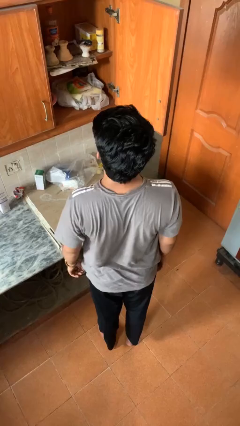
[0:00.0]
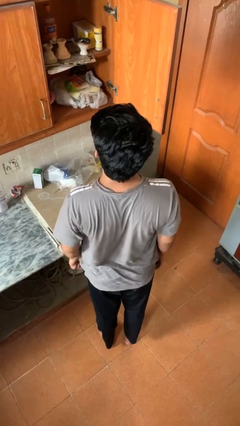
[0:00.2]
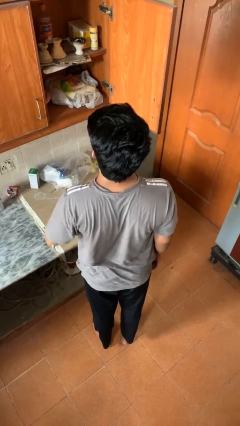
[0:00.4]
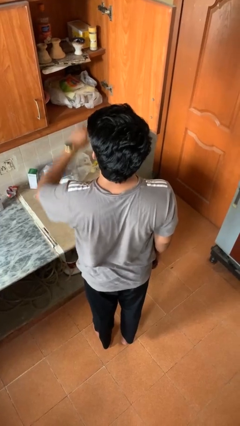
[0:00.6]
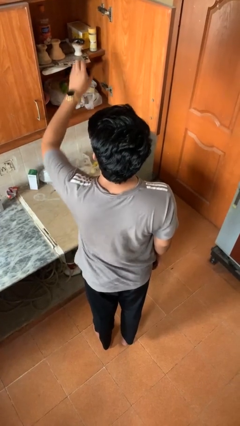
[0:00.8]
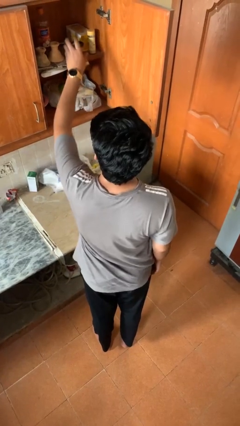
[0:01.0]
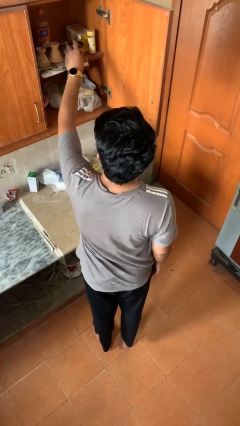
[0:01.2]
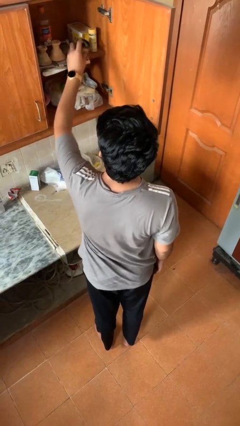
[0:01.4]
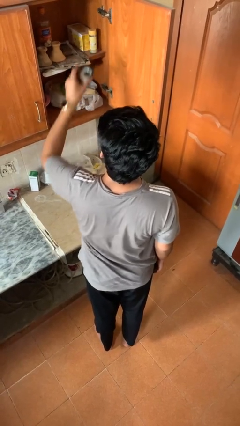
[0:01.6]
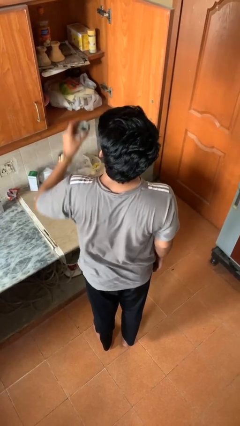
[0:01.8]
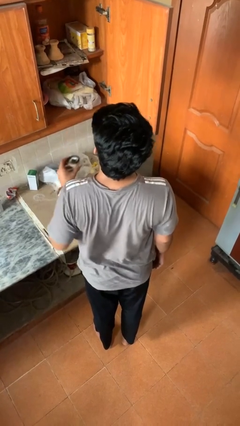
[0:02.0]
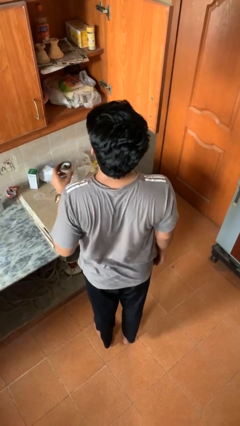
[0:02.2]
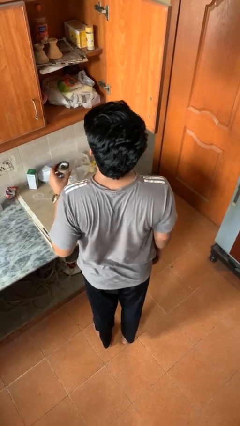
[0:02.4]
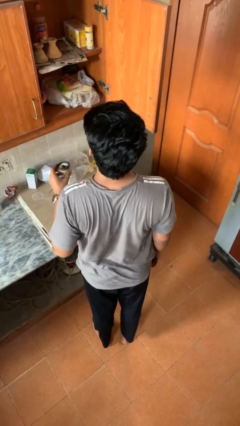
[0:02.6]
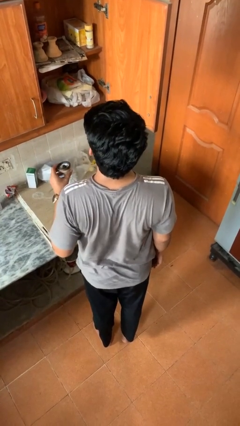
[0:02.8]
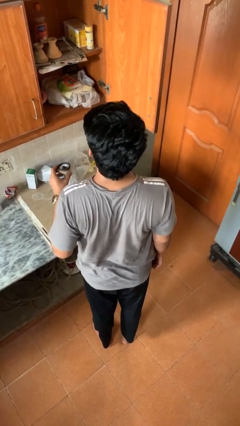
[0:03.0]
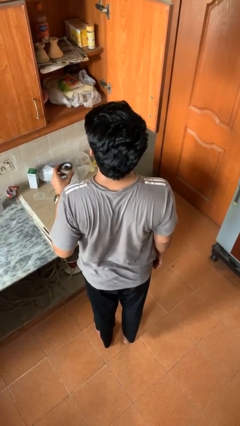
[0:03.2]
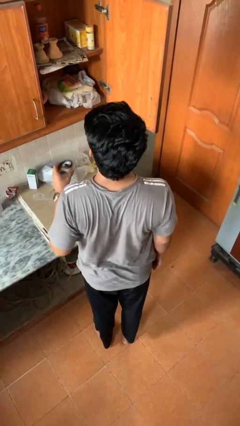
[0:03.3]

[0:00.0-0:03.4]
person takes object from cabinet

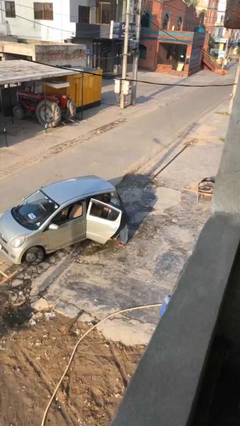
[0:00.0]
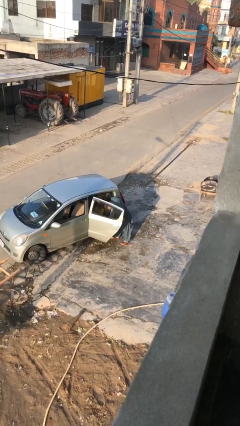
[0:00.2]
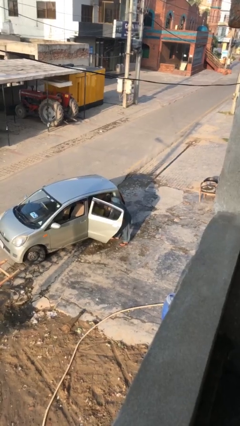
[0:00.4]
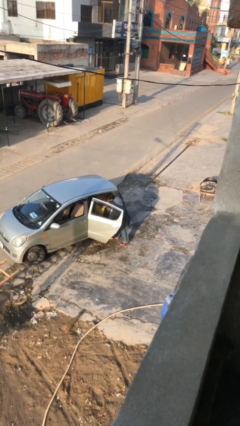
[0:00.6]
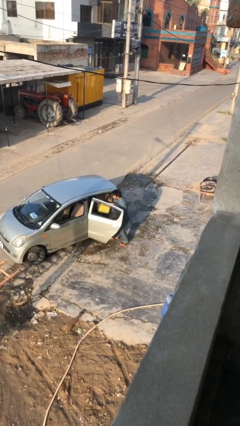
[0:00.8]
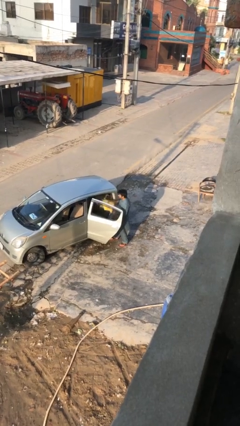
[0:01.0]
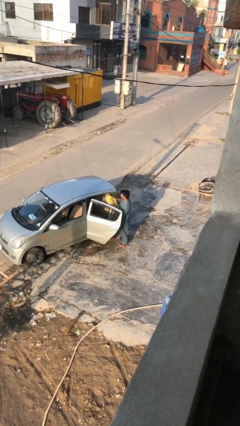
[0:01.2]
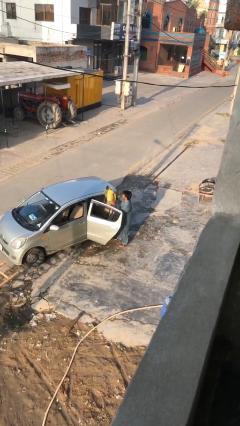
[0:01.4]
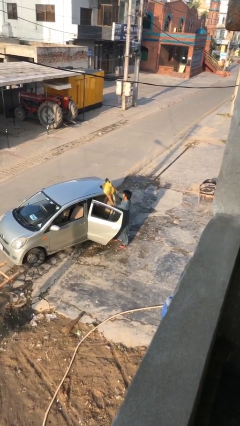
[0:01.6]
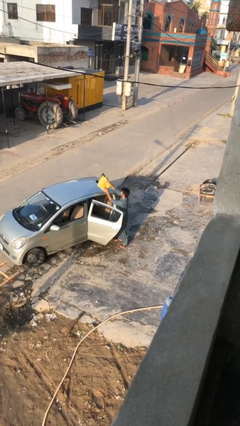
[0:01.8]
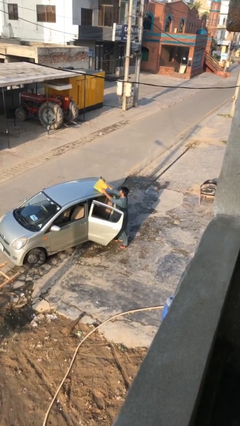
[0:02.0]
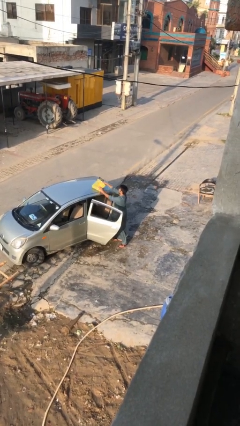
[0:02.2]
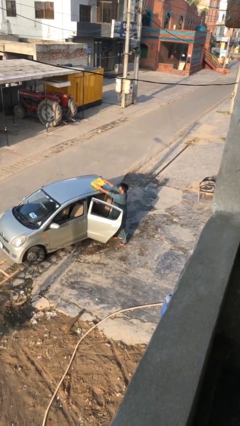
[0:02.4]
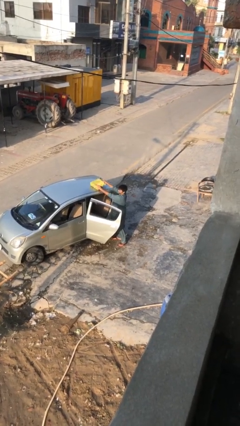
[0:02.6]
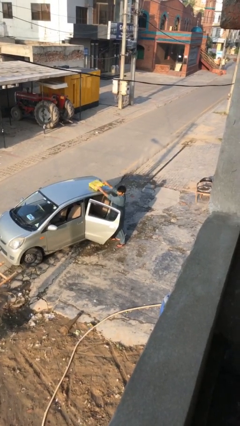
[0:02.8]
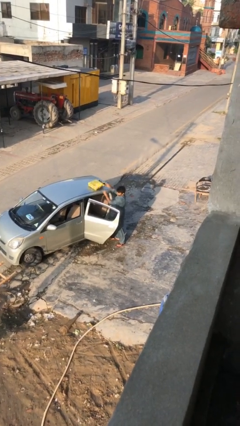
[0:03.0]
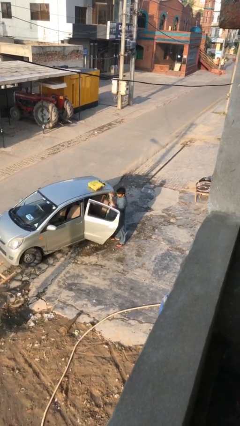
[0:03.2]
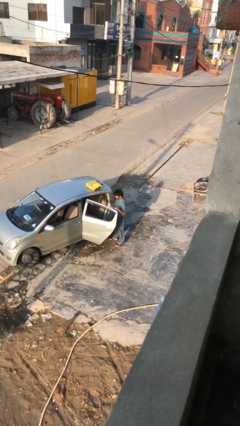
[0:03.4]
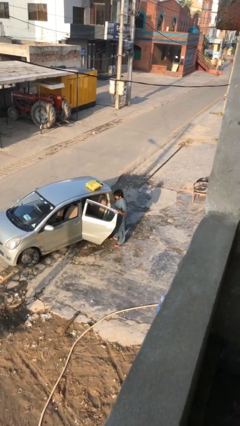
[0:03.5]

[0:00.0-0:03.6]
person unloads car

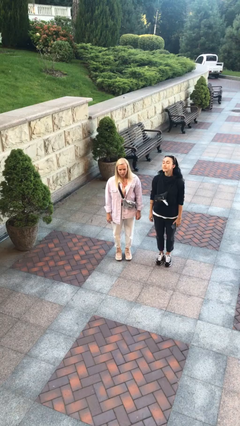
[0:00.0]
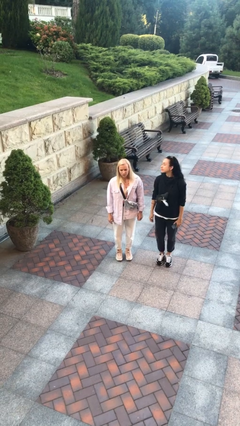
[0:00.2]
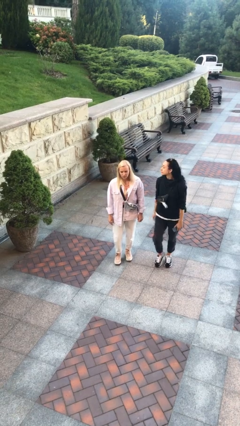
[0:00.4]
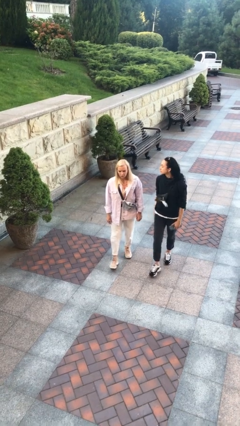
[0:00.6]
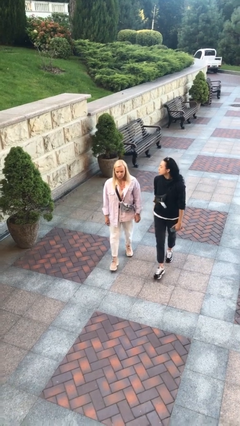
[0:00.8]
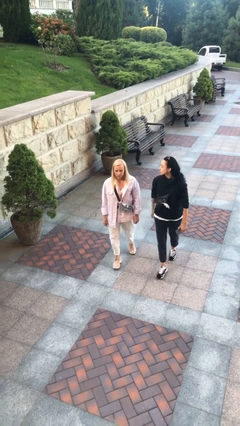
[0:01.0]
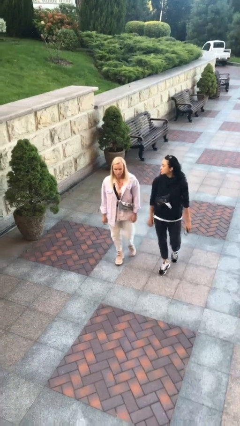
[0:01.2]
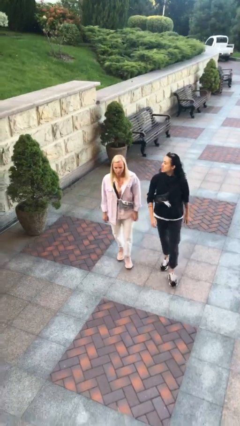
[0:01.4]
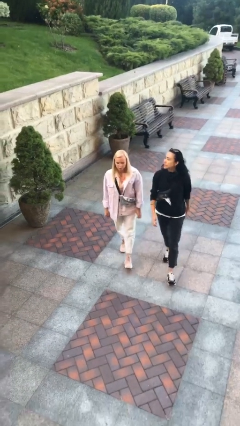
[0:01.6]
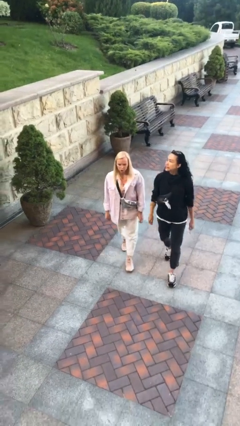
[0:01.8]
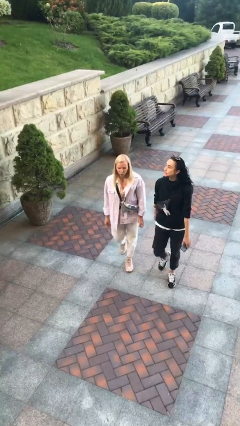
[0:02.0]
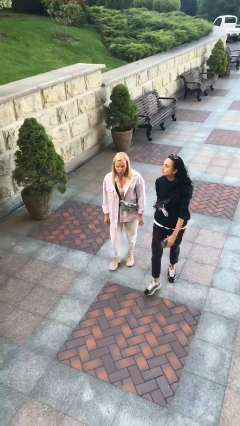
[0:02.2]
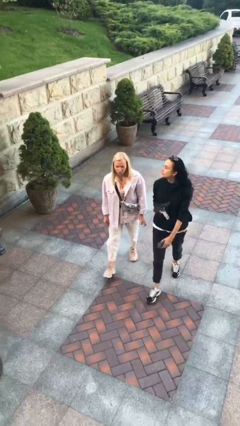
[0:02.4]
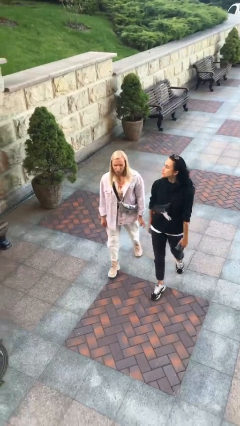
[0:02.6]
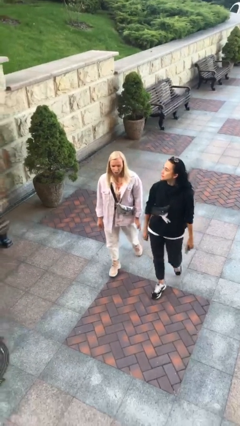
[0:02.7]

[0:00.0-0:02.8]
person talks to person

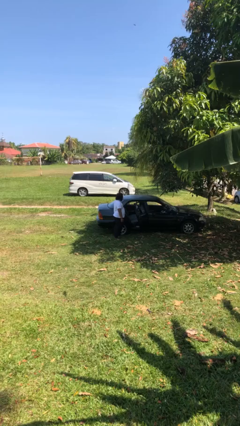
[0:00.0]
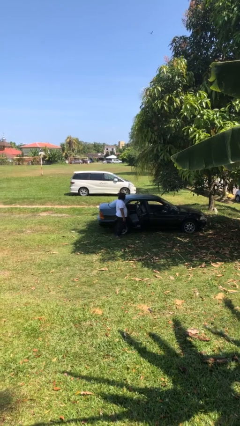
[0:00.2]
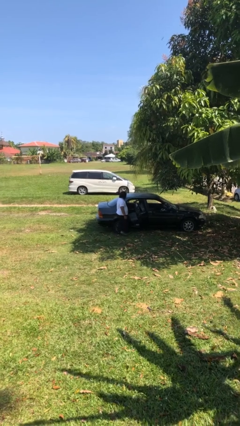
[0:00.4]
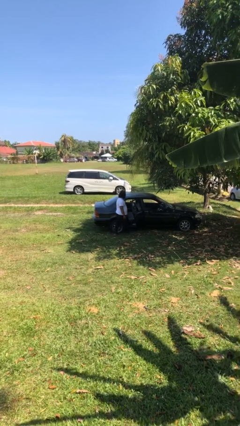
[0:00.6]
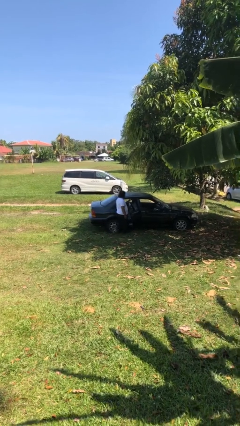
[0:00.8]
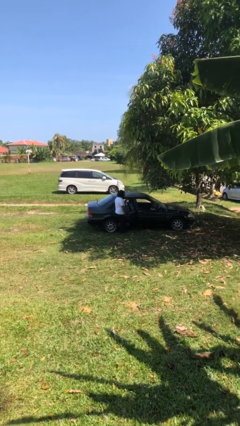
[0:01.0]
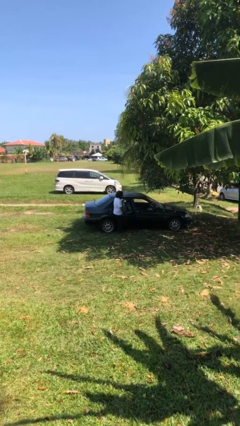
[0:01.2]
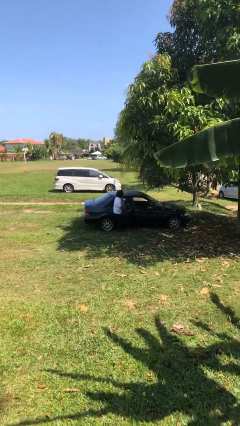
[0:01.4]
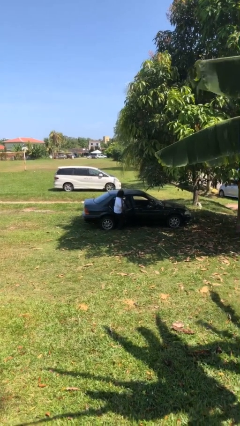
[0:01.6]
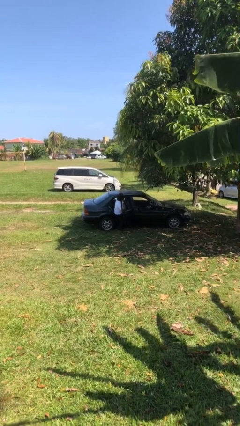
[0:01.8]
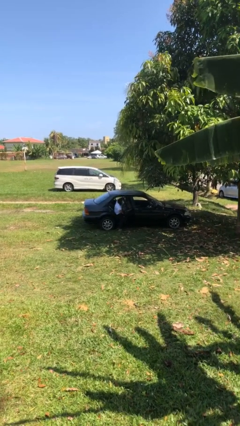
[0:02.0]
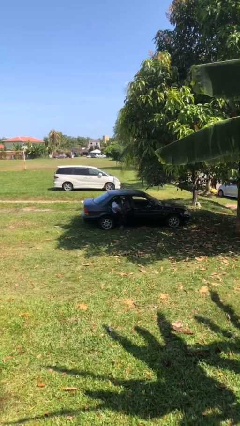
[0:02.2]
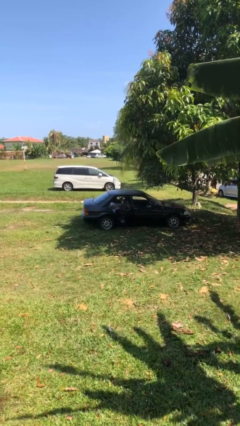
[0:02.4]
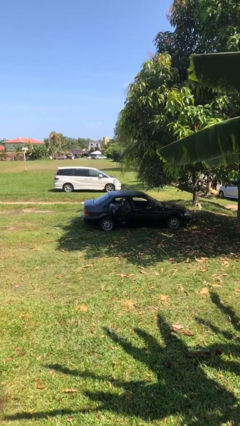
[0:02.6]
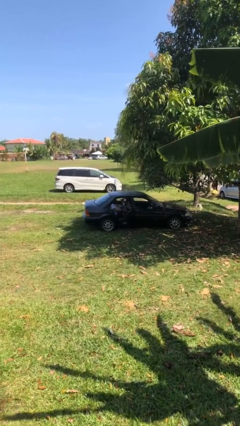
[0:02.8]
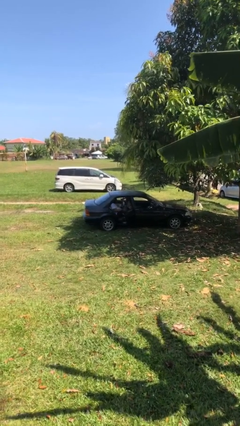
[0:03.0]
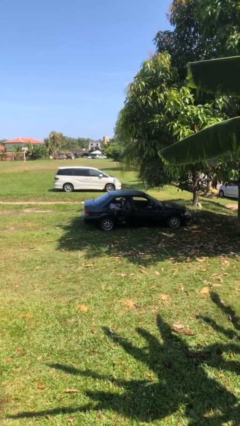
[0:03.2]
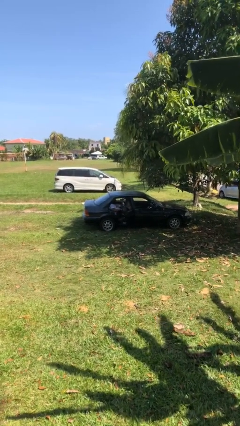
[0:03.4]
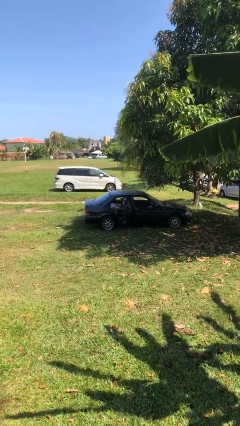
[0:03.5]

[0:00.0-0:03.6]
person enters car

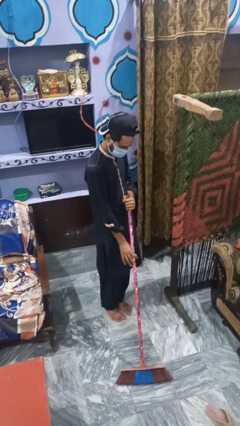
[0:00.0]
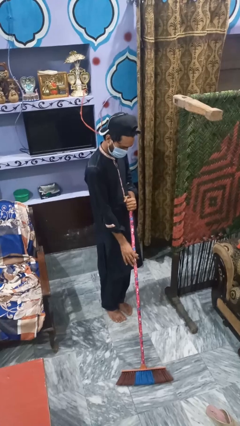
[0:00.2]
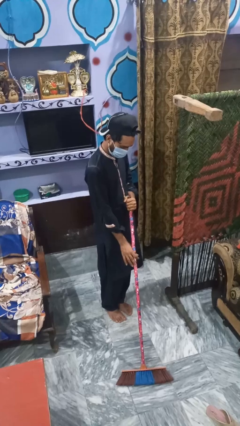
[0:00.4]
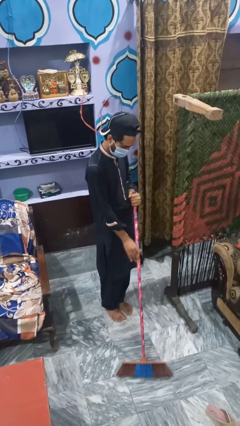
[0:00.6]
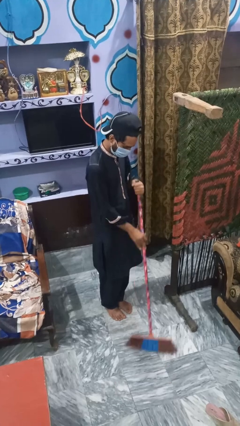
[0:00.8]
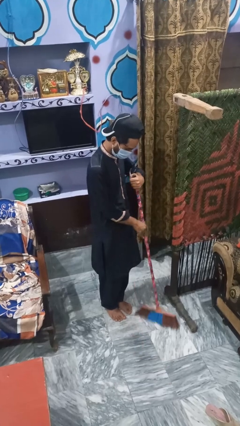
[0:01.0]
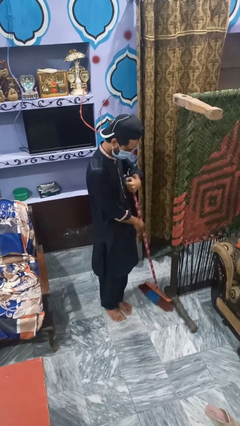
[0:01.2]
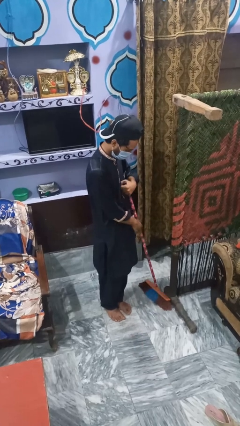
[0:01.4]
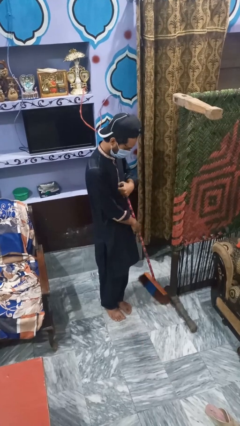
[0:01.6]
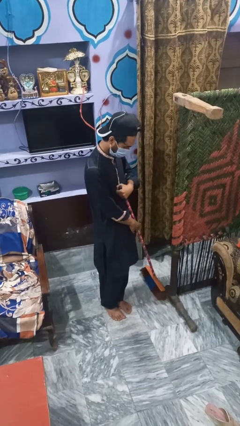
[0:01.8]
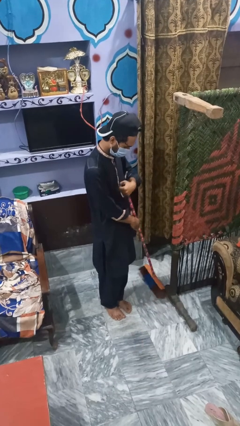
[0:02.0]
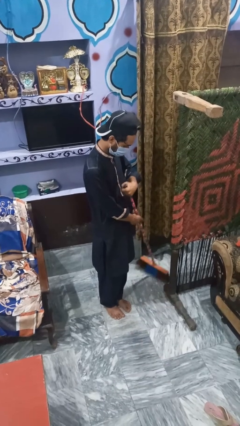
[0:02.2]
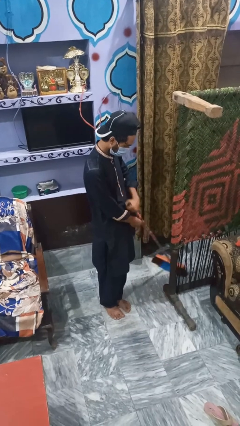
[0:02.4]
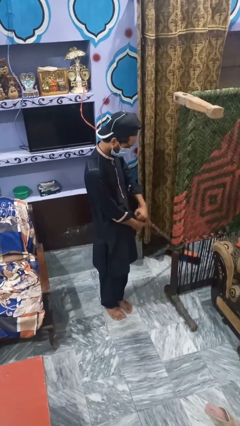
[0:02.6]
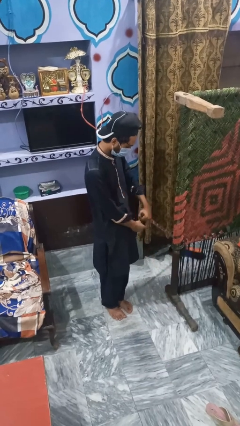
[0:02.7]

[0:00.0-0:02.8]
person mops

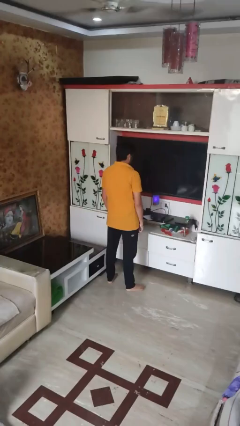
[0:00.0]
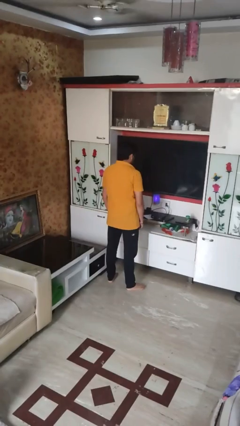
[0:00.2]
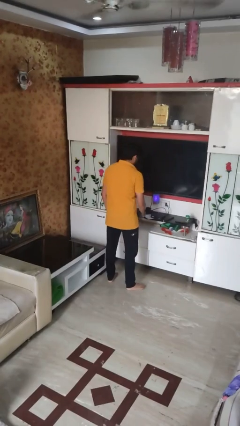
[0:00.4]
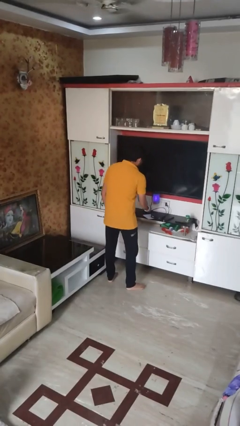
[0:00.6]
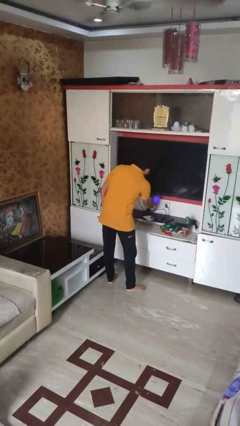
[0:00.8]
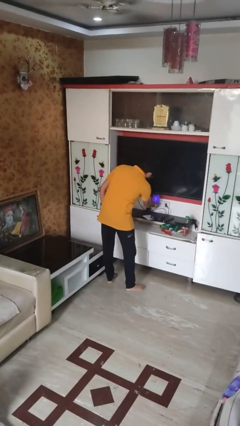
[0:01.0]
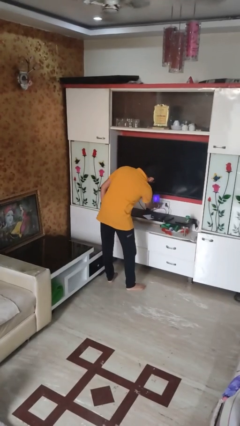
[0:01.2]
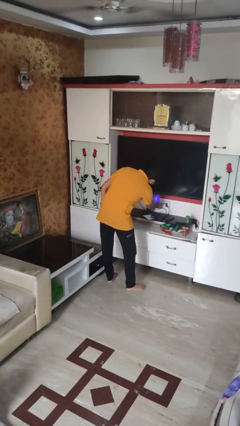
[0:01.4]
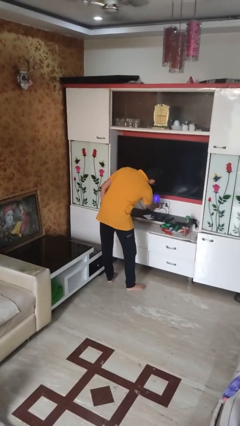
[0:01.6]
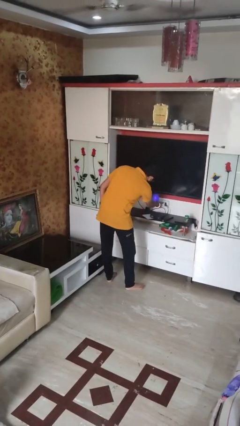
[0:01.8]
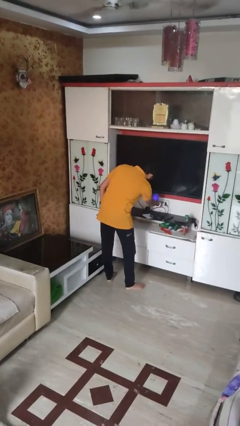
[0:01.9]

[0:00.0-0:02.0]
person turns off lamp
